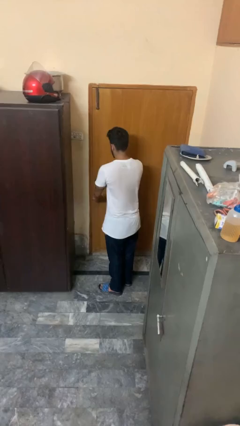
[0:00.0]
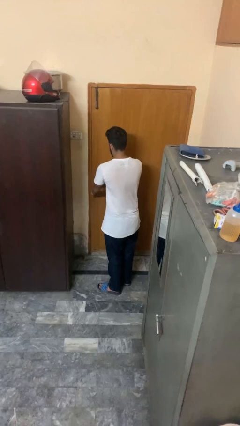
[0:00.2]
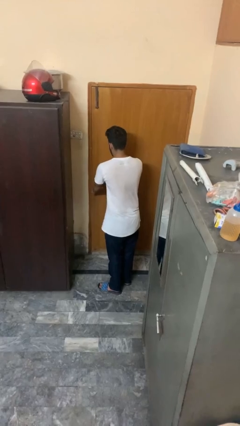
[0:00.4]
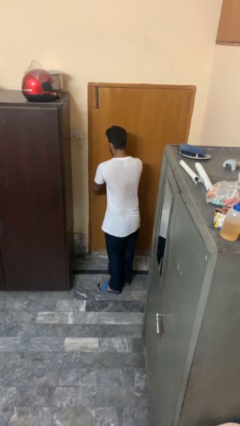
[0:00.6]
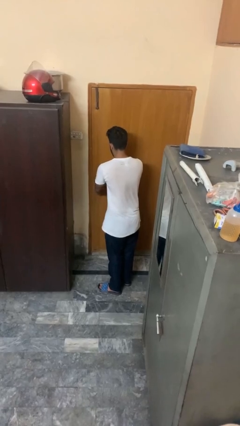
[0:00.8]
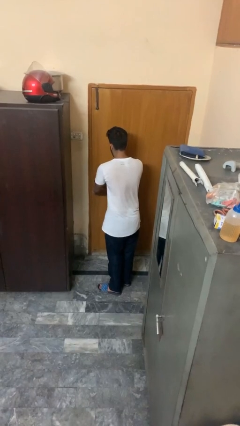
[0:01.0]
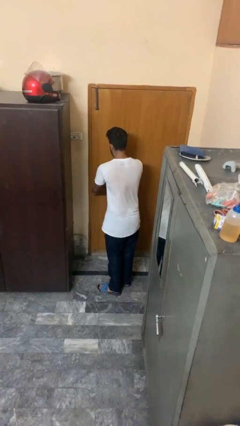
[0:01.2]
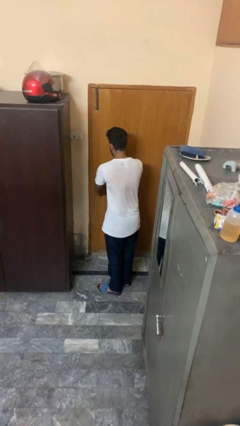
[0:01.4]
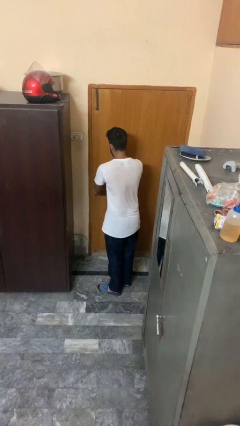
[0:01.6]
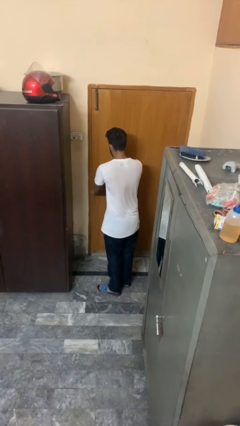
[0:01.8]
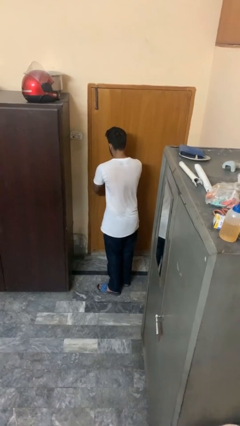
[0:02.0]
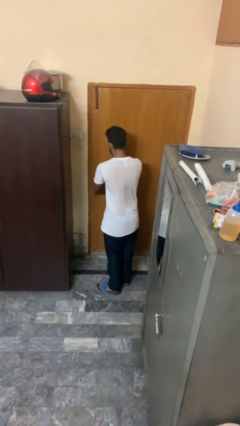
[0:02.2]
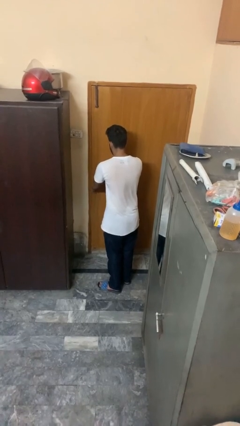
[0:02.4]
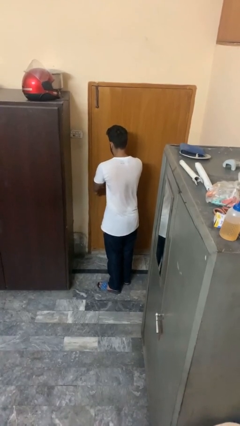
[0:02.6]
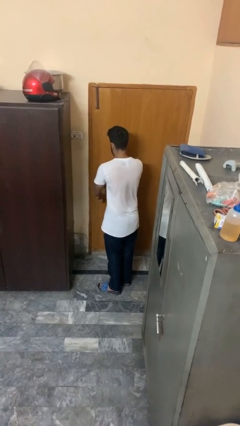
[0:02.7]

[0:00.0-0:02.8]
person locks door with keys

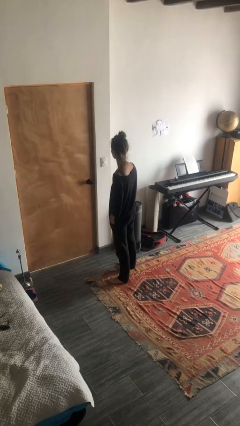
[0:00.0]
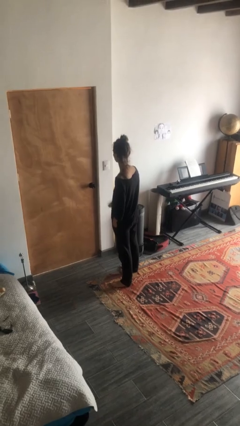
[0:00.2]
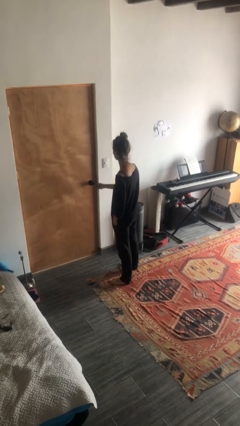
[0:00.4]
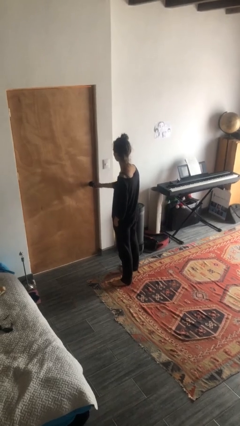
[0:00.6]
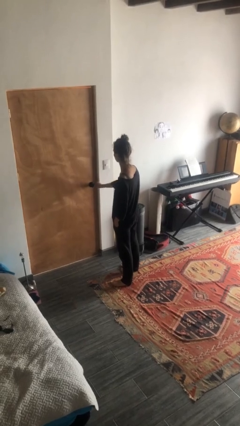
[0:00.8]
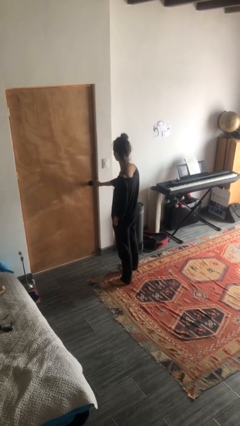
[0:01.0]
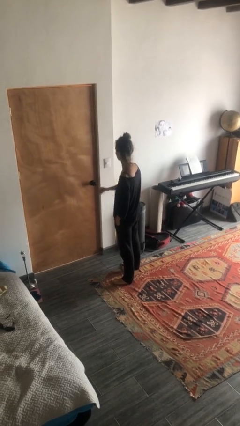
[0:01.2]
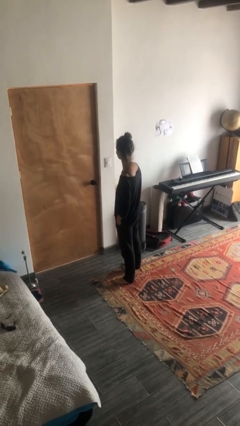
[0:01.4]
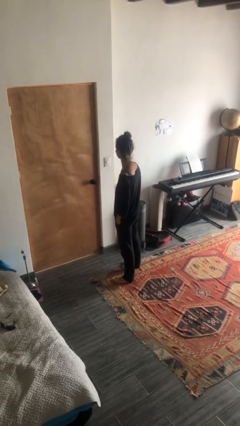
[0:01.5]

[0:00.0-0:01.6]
person unlocks door with keys

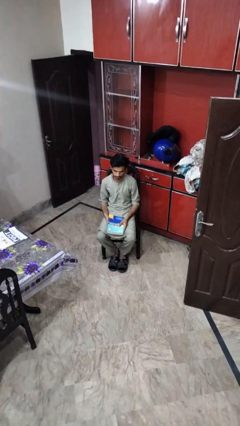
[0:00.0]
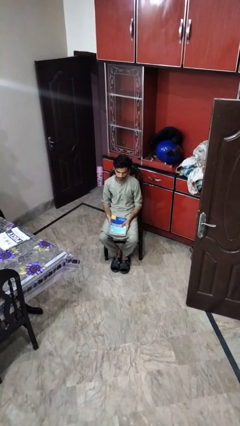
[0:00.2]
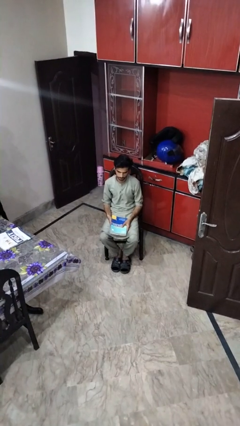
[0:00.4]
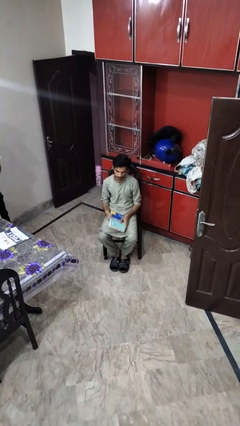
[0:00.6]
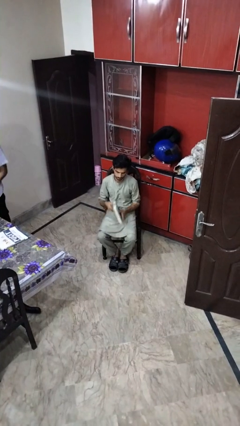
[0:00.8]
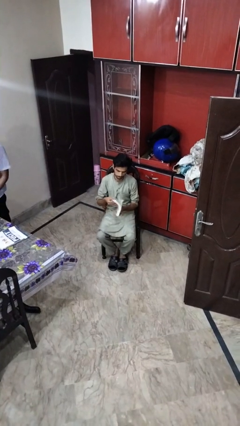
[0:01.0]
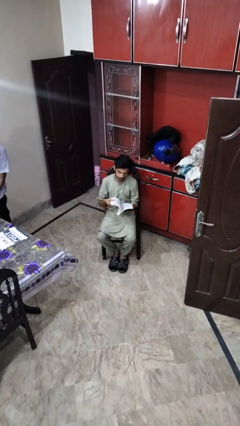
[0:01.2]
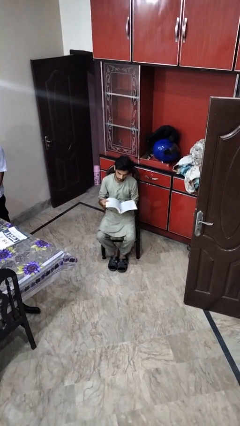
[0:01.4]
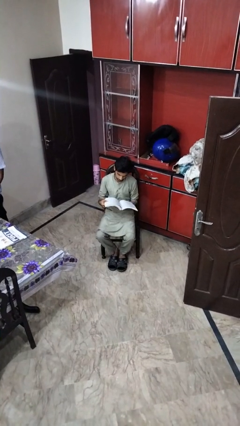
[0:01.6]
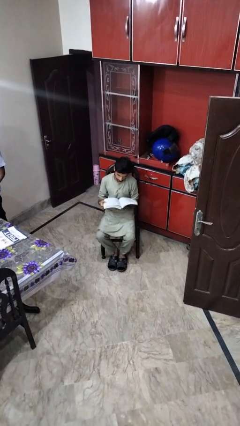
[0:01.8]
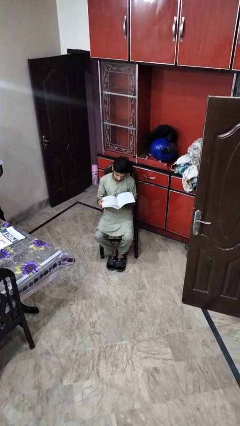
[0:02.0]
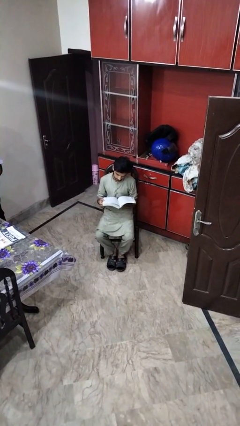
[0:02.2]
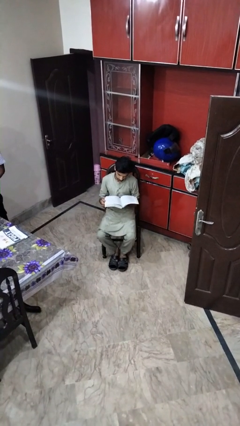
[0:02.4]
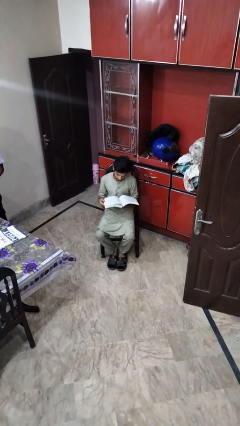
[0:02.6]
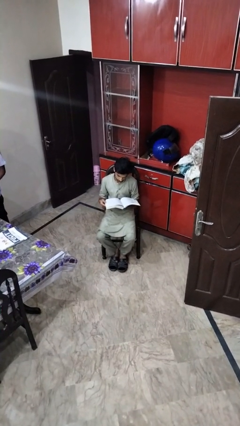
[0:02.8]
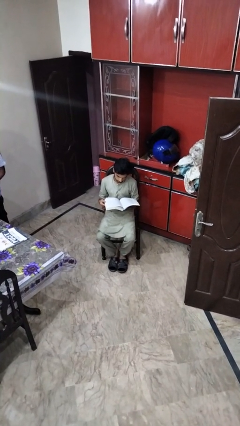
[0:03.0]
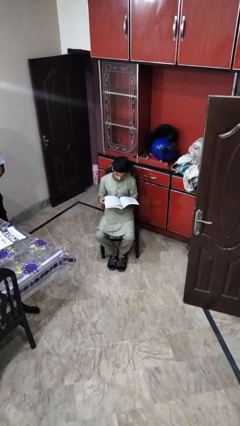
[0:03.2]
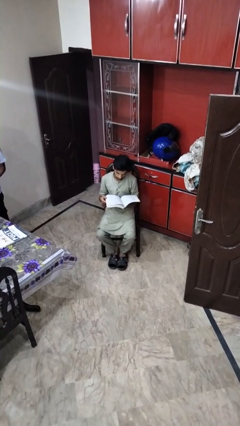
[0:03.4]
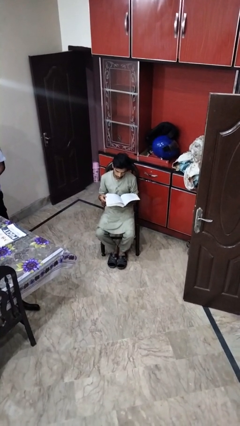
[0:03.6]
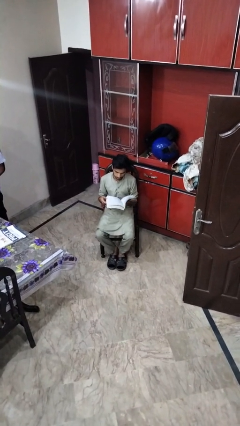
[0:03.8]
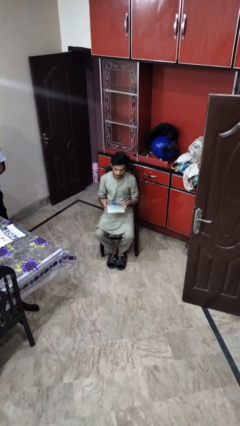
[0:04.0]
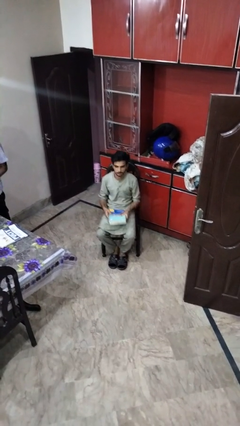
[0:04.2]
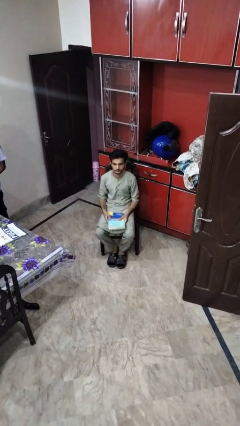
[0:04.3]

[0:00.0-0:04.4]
person reads book

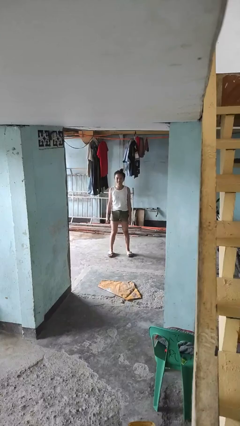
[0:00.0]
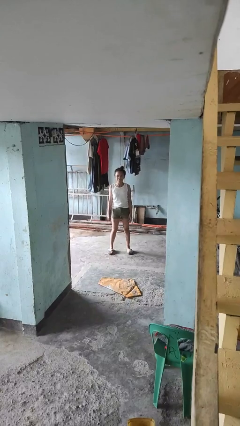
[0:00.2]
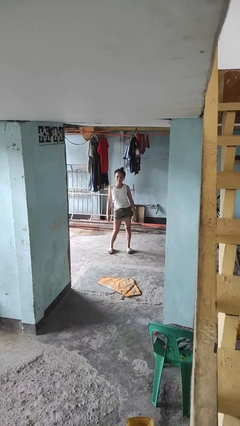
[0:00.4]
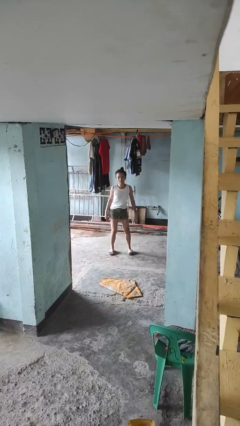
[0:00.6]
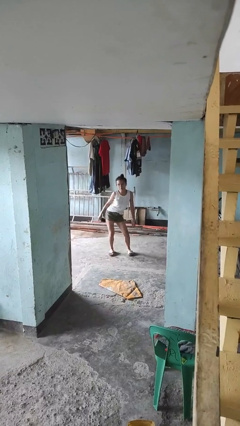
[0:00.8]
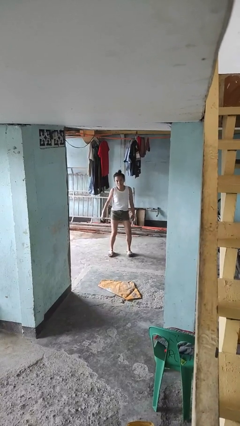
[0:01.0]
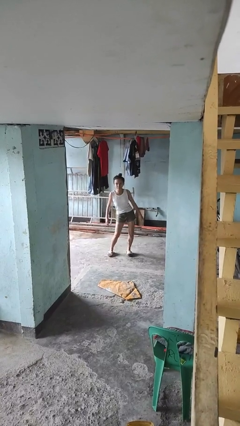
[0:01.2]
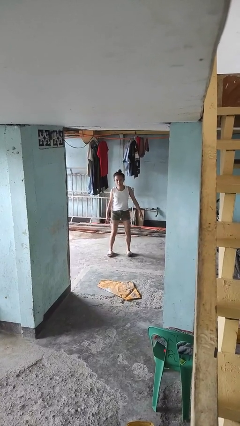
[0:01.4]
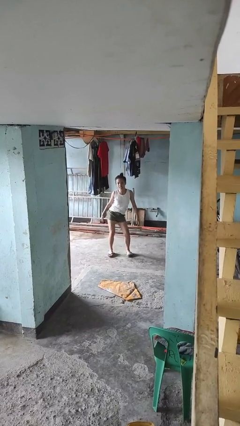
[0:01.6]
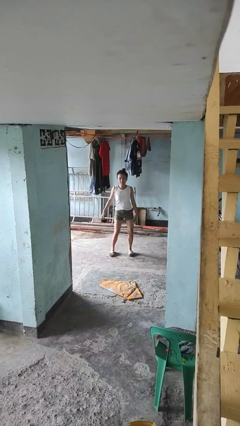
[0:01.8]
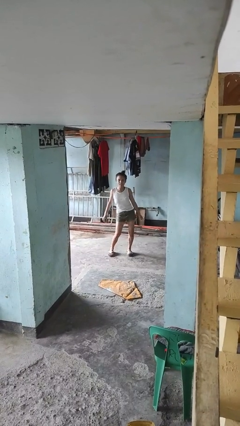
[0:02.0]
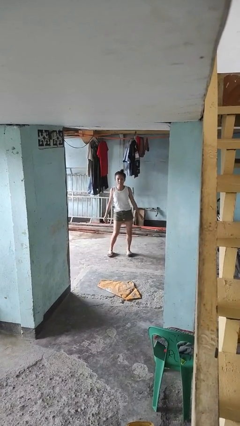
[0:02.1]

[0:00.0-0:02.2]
person wiggles hips

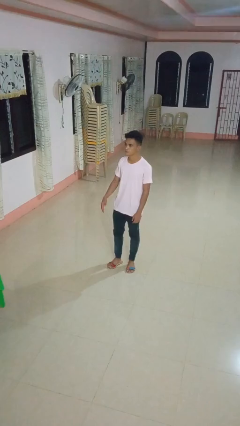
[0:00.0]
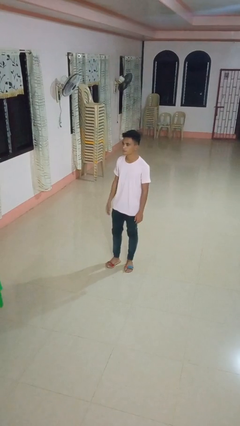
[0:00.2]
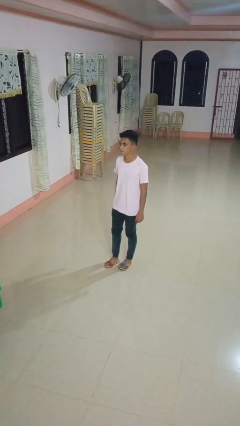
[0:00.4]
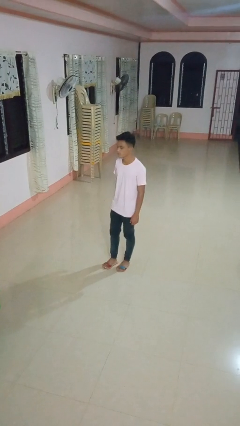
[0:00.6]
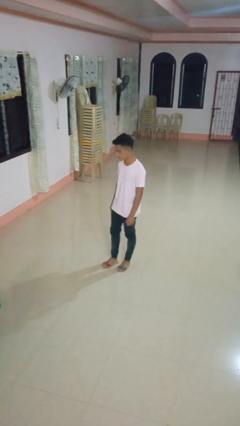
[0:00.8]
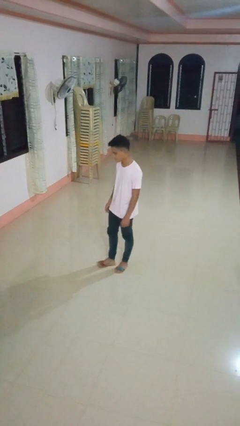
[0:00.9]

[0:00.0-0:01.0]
person slaps hands on thighs

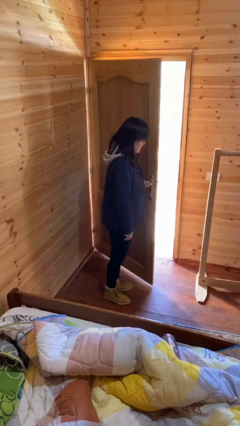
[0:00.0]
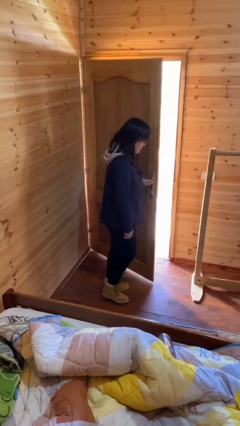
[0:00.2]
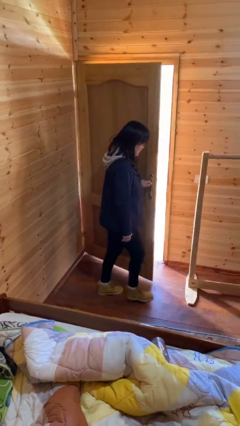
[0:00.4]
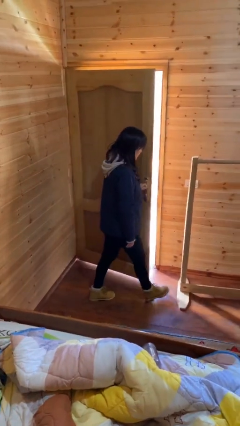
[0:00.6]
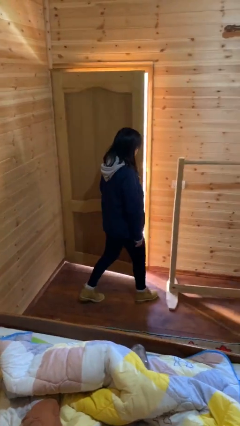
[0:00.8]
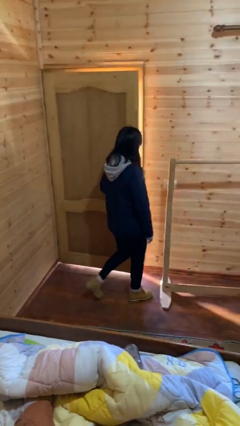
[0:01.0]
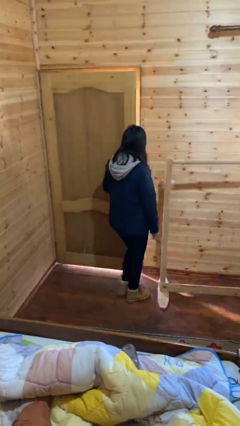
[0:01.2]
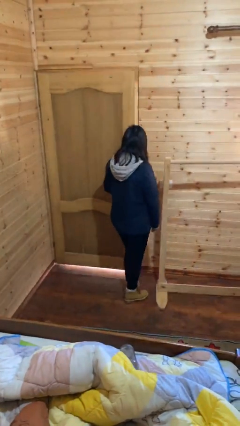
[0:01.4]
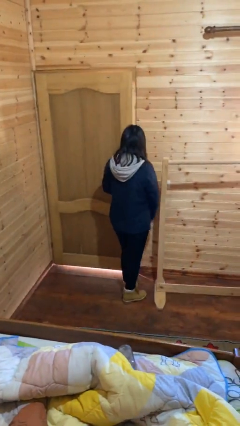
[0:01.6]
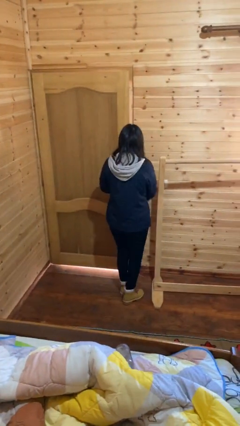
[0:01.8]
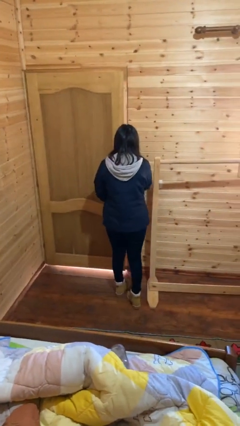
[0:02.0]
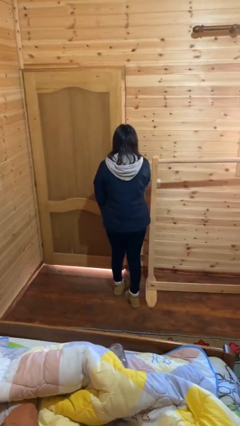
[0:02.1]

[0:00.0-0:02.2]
person closes facility door

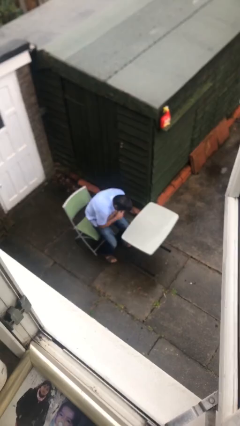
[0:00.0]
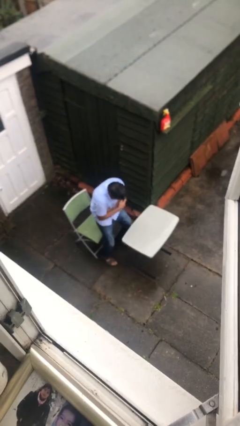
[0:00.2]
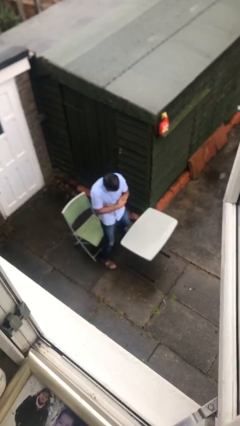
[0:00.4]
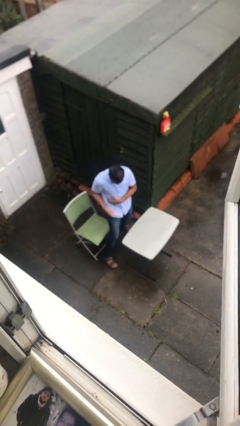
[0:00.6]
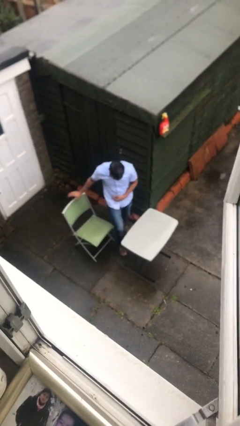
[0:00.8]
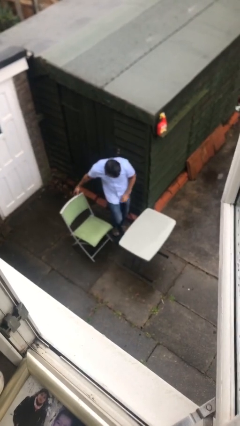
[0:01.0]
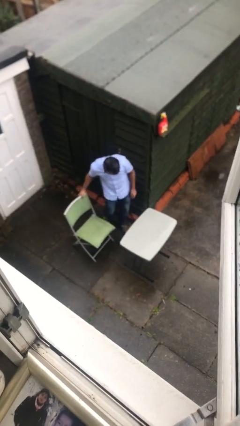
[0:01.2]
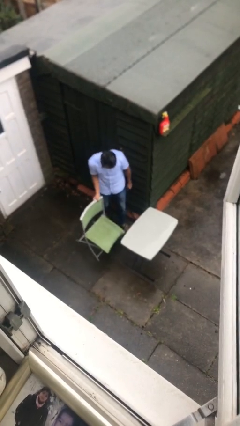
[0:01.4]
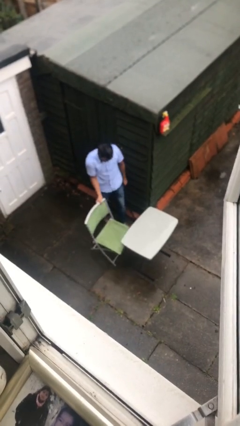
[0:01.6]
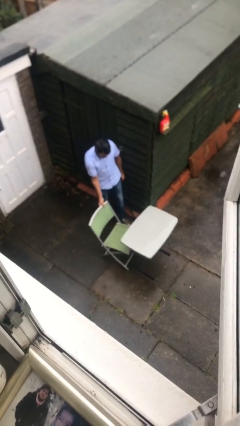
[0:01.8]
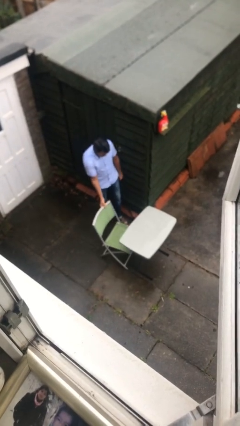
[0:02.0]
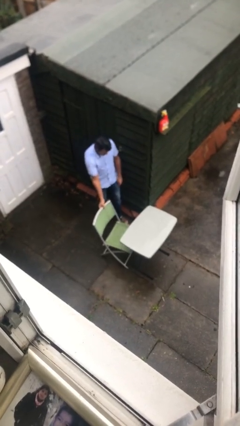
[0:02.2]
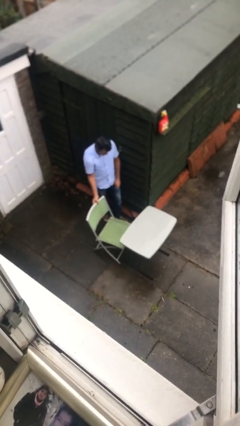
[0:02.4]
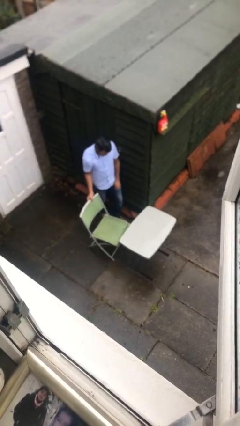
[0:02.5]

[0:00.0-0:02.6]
person stands up

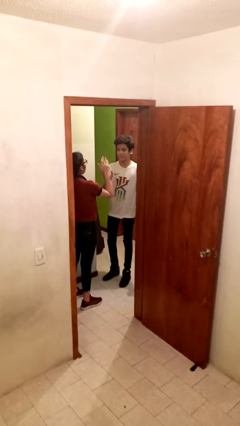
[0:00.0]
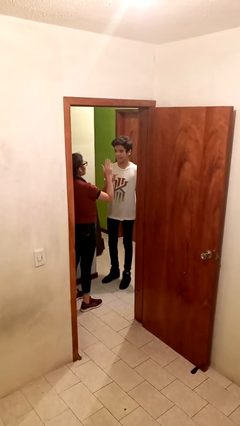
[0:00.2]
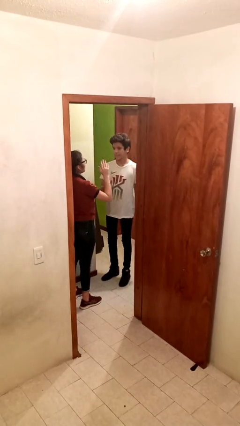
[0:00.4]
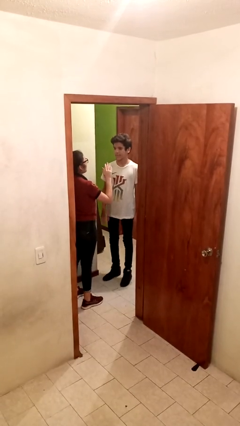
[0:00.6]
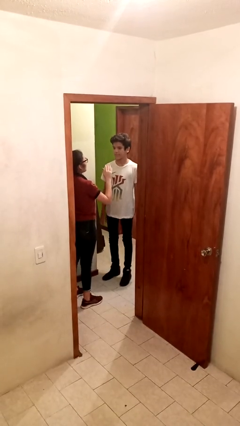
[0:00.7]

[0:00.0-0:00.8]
person highfives hand
